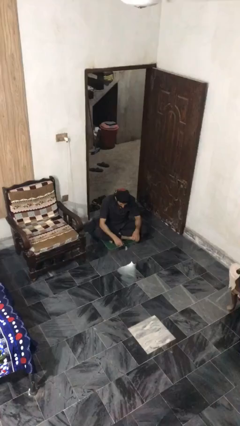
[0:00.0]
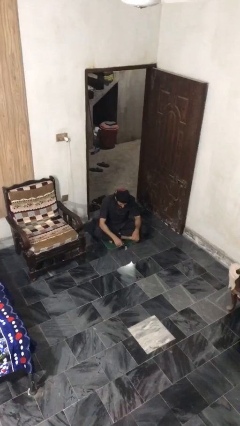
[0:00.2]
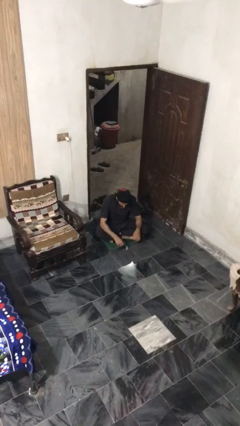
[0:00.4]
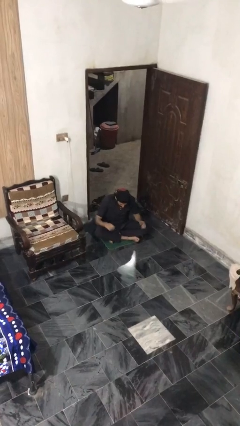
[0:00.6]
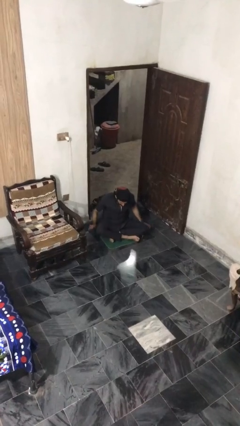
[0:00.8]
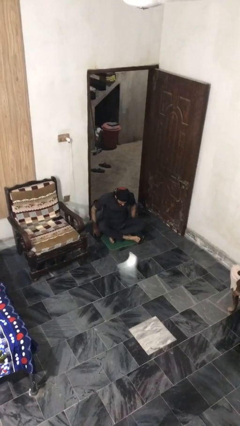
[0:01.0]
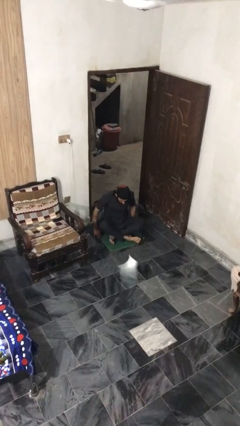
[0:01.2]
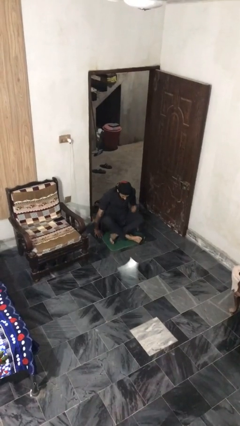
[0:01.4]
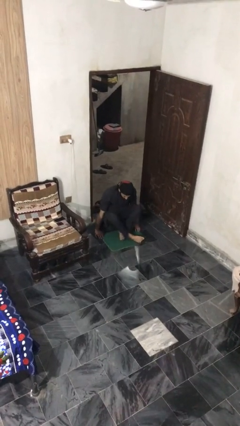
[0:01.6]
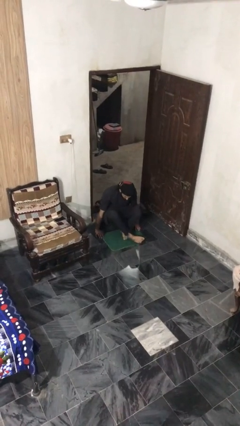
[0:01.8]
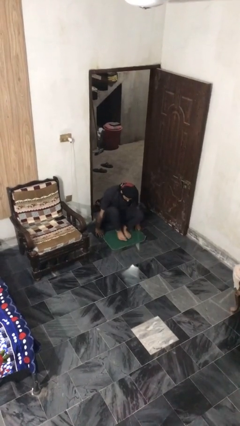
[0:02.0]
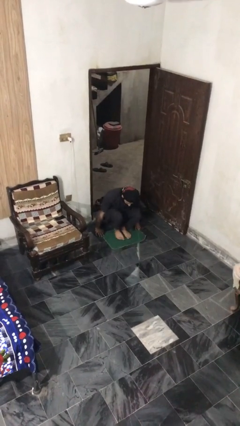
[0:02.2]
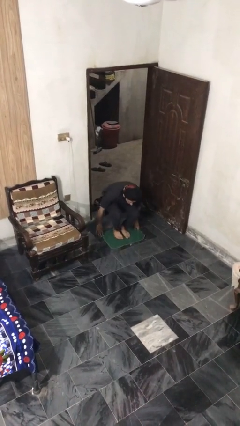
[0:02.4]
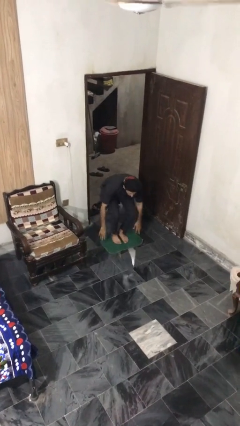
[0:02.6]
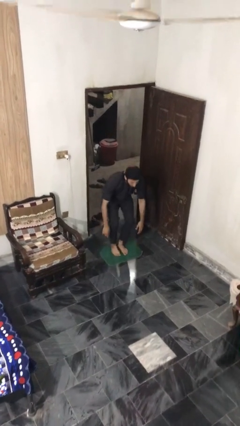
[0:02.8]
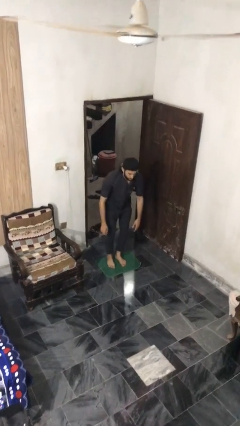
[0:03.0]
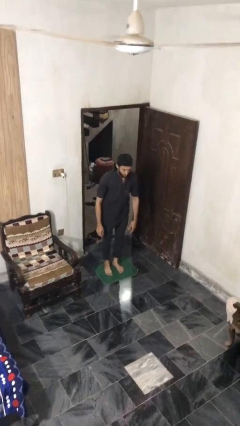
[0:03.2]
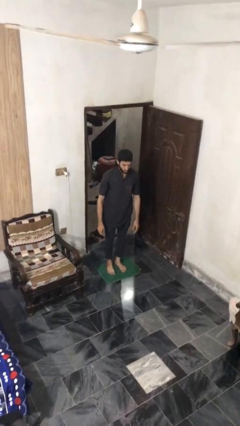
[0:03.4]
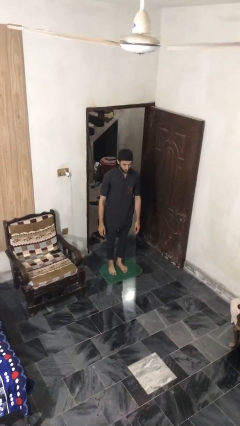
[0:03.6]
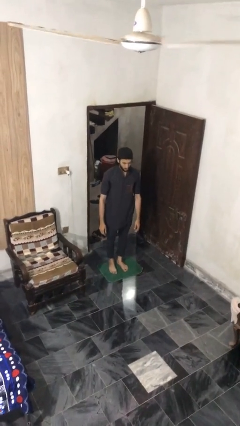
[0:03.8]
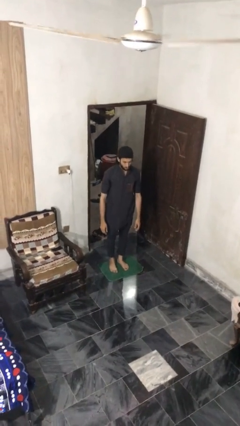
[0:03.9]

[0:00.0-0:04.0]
person stands up from floor

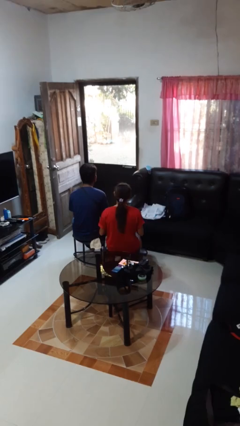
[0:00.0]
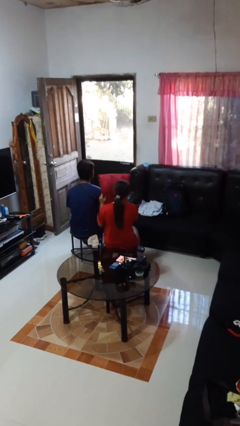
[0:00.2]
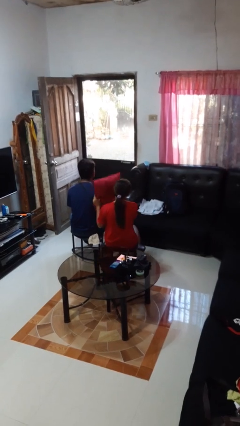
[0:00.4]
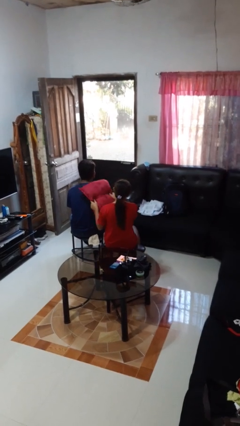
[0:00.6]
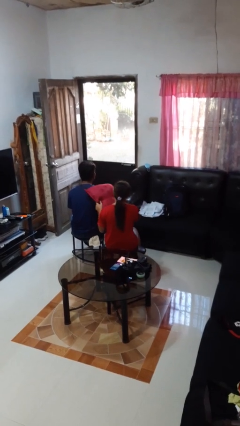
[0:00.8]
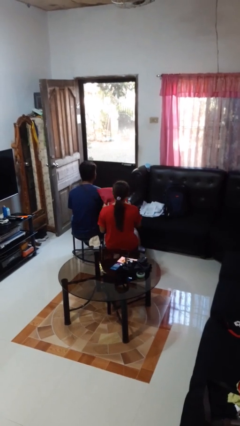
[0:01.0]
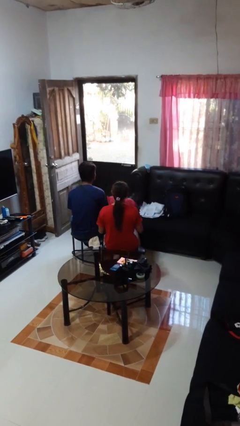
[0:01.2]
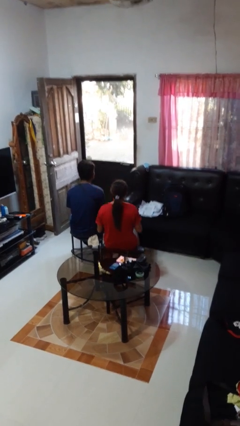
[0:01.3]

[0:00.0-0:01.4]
person hits person with pillow

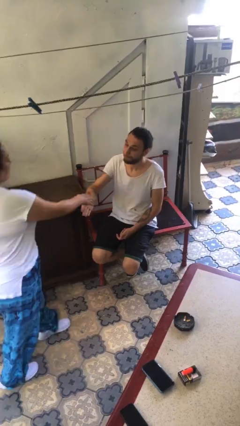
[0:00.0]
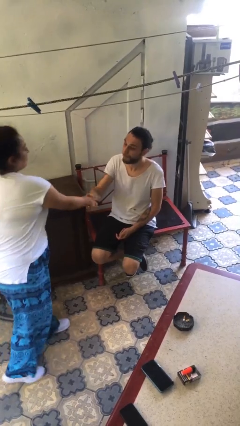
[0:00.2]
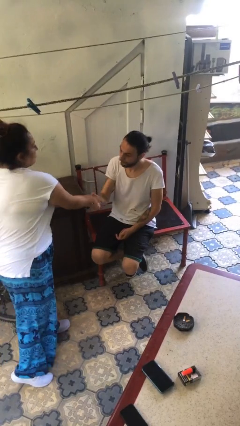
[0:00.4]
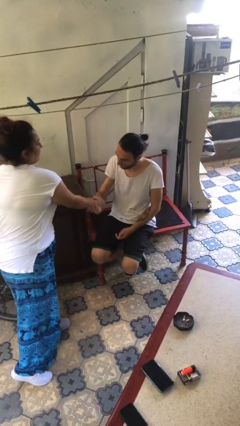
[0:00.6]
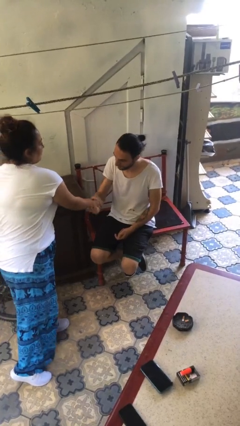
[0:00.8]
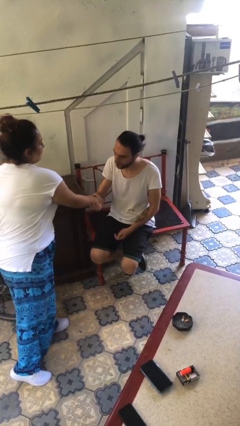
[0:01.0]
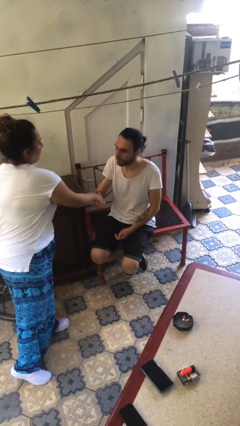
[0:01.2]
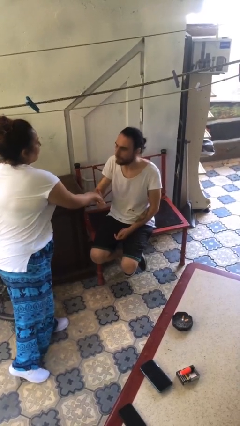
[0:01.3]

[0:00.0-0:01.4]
person shakes hand

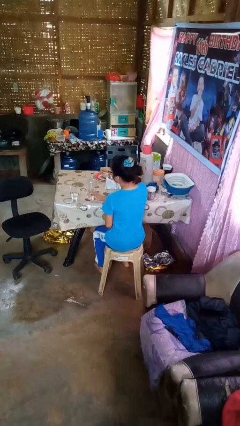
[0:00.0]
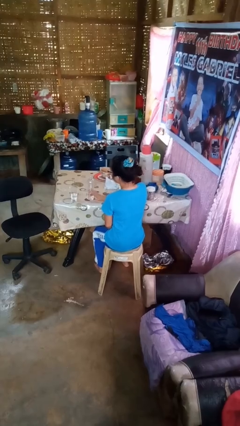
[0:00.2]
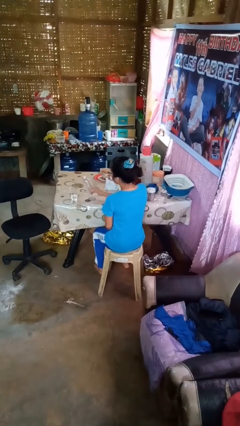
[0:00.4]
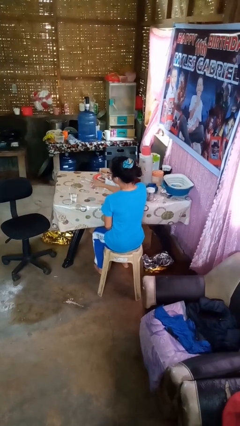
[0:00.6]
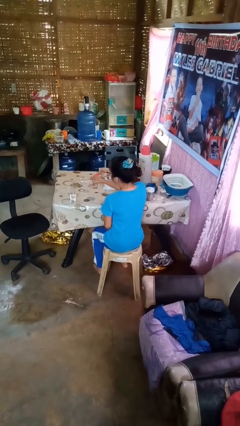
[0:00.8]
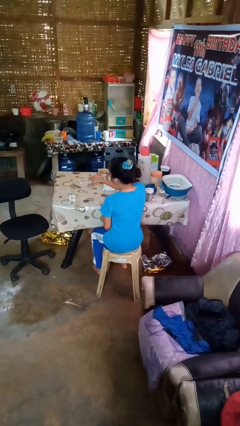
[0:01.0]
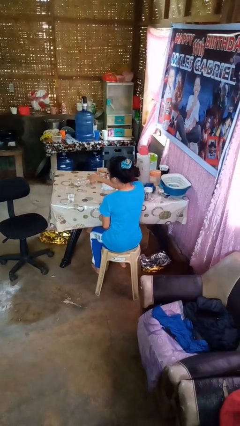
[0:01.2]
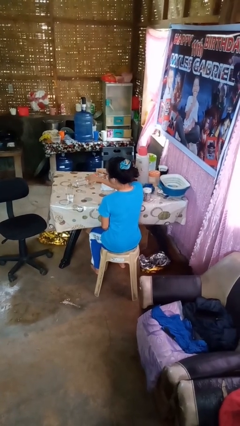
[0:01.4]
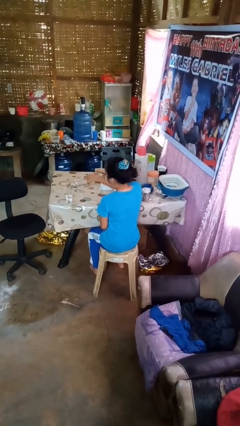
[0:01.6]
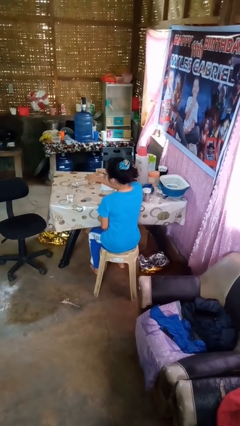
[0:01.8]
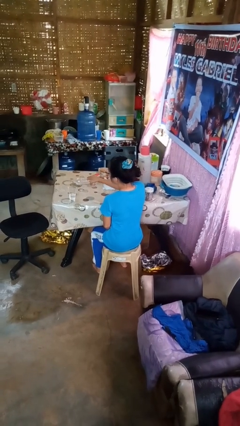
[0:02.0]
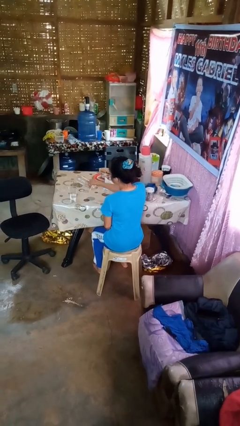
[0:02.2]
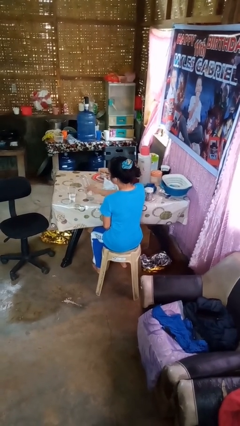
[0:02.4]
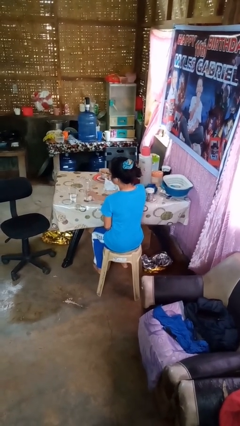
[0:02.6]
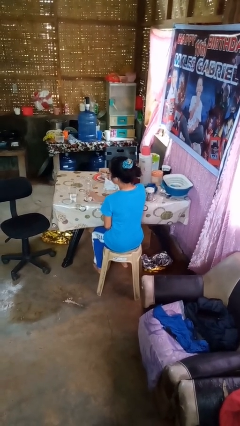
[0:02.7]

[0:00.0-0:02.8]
person pours liquid into cup

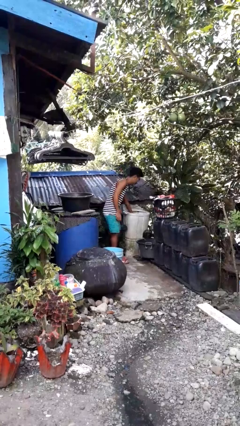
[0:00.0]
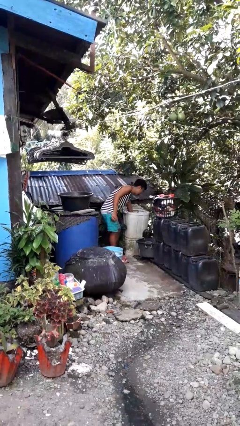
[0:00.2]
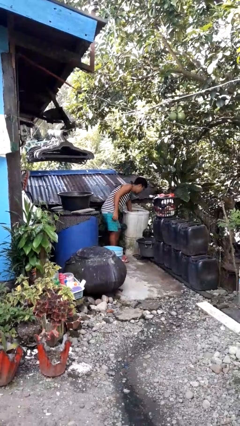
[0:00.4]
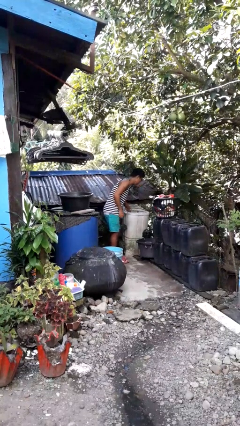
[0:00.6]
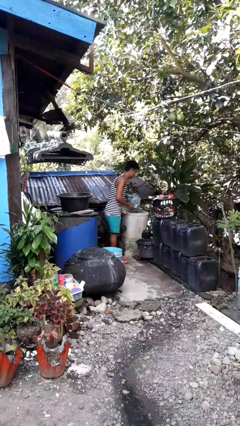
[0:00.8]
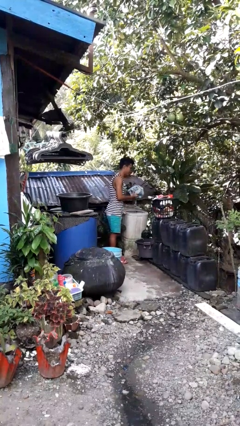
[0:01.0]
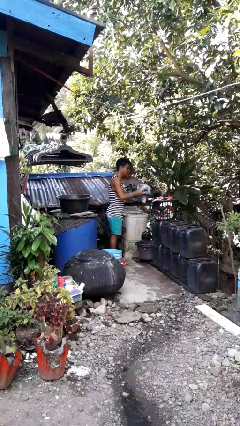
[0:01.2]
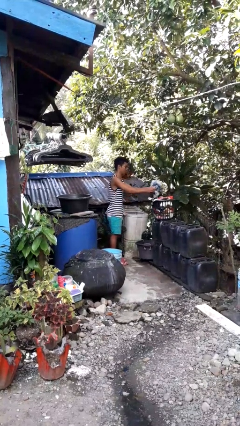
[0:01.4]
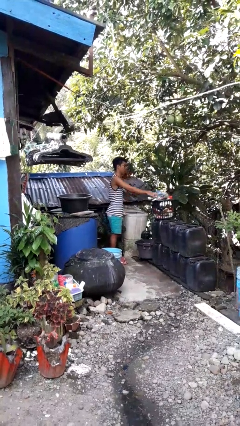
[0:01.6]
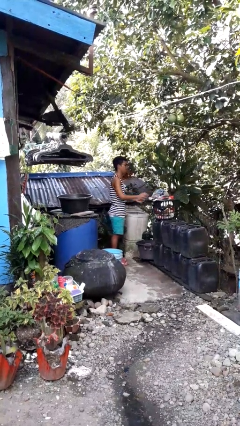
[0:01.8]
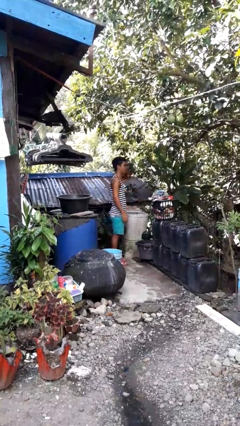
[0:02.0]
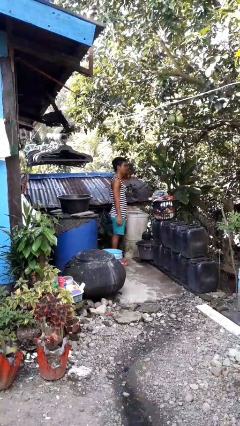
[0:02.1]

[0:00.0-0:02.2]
person unloads dryer

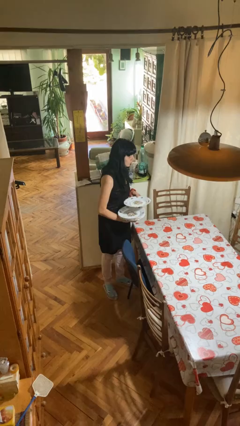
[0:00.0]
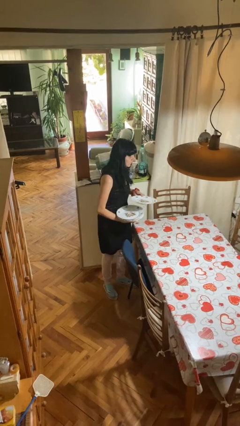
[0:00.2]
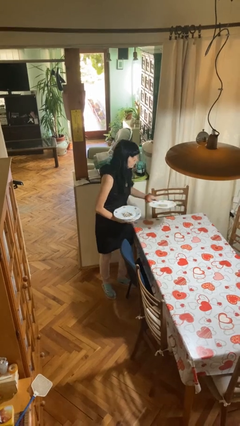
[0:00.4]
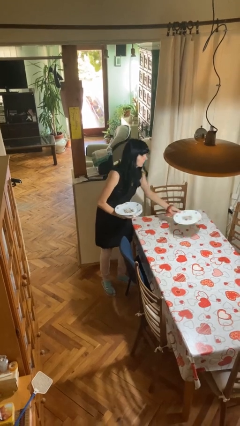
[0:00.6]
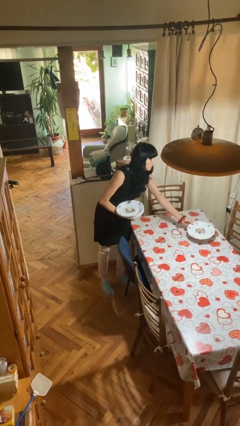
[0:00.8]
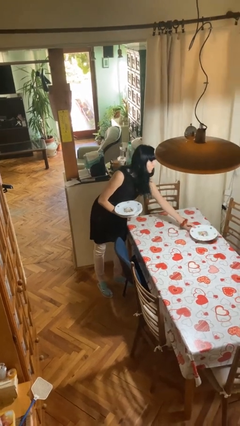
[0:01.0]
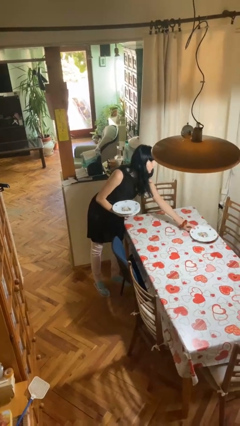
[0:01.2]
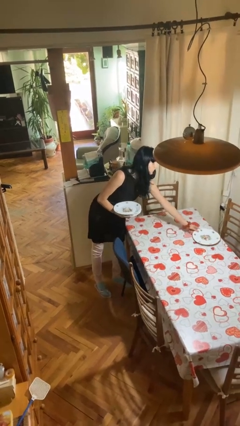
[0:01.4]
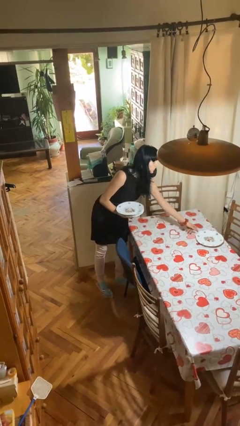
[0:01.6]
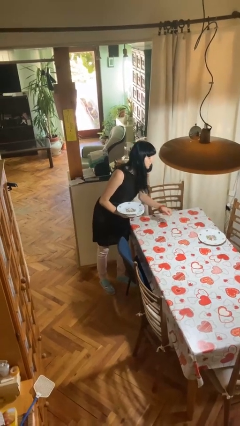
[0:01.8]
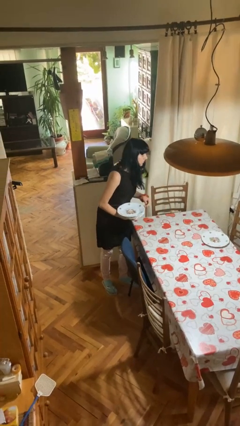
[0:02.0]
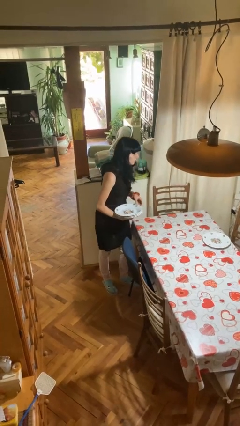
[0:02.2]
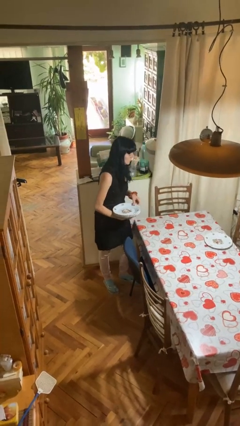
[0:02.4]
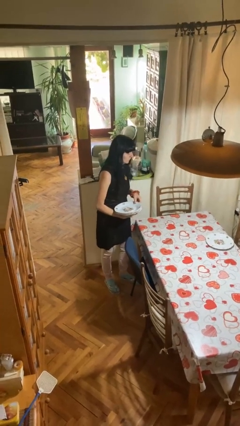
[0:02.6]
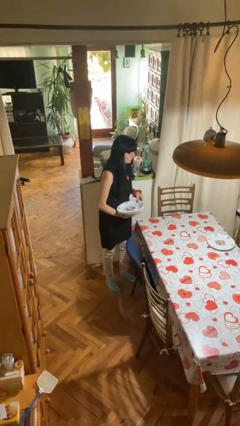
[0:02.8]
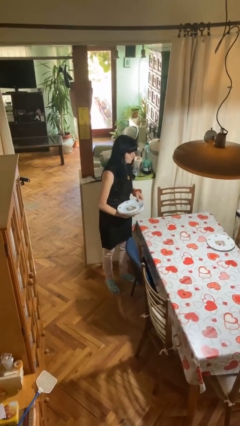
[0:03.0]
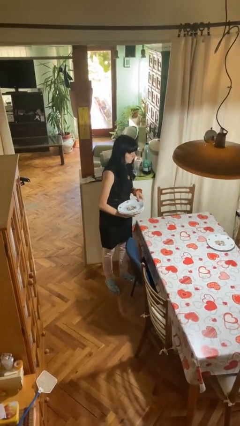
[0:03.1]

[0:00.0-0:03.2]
person sets table

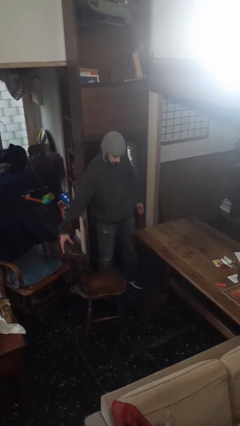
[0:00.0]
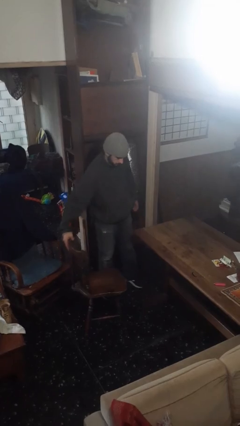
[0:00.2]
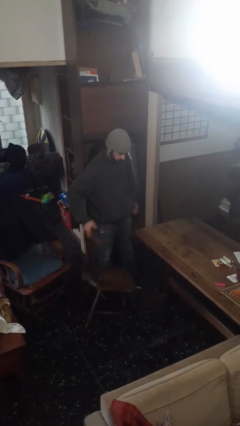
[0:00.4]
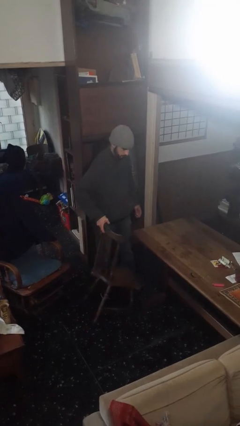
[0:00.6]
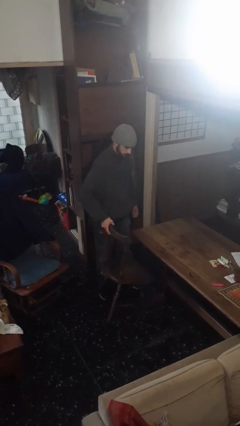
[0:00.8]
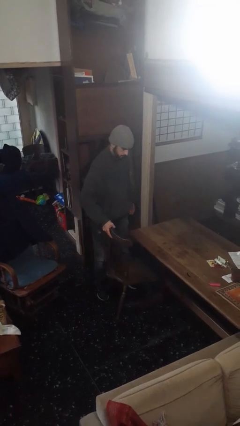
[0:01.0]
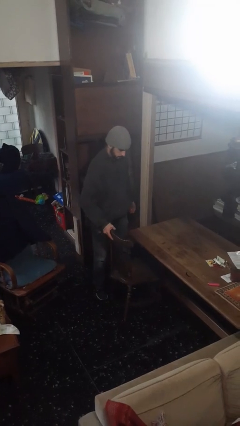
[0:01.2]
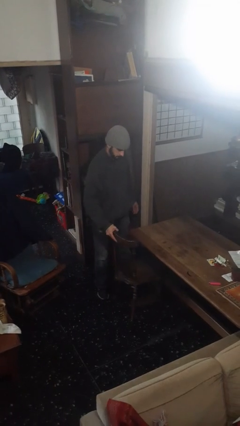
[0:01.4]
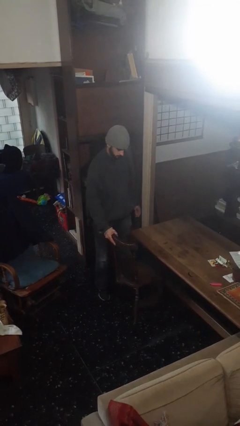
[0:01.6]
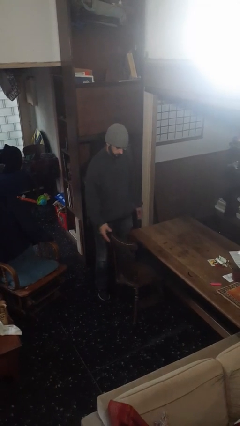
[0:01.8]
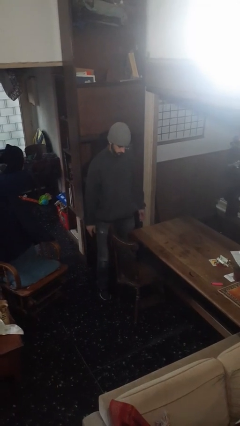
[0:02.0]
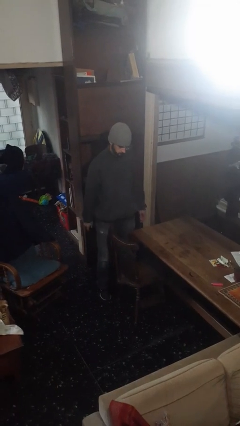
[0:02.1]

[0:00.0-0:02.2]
person pushes in chair
